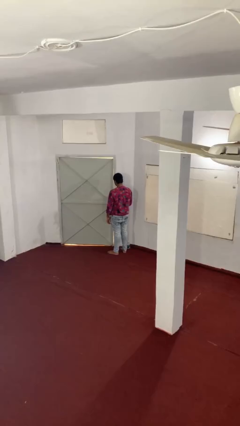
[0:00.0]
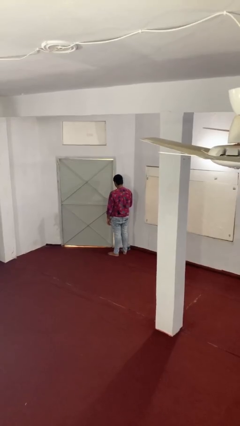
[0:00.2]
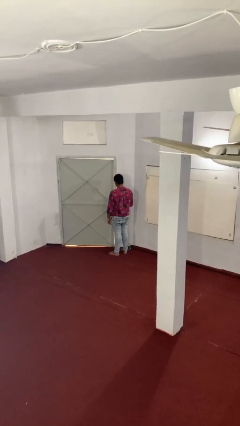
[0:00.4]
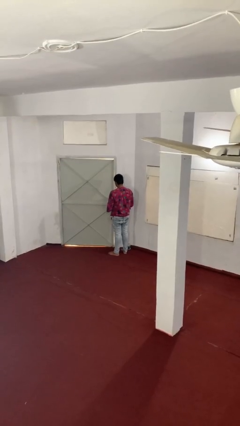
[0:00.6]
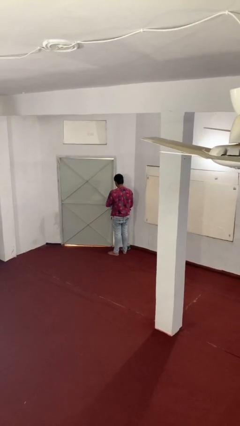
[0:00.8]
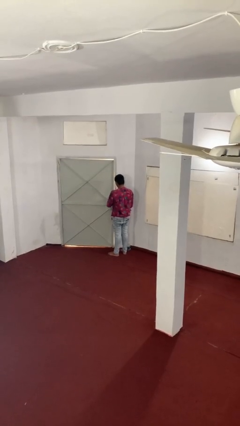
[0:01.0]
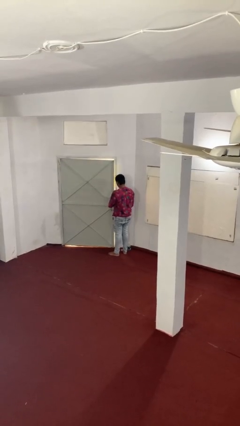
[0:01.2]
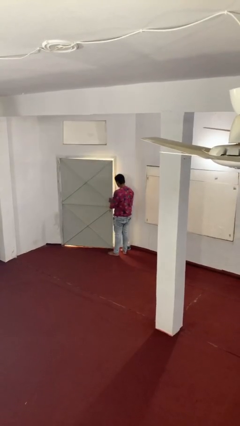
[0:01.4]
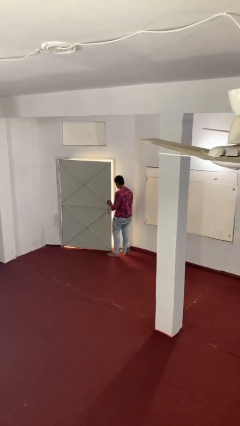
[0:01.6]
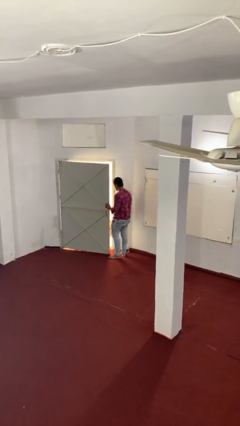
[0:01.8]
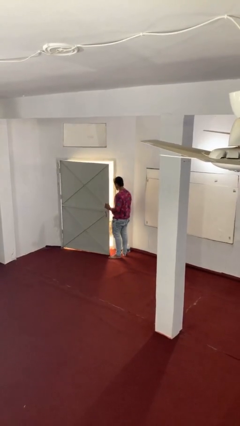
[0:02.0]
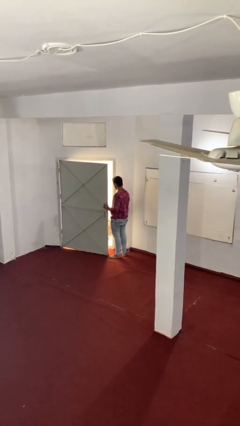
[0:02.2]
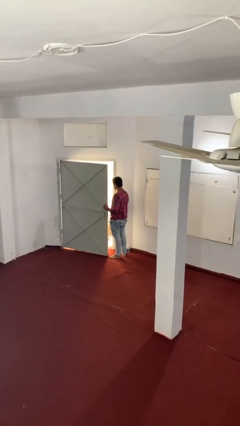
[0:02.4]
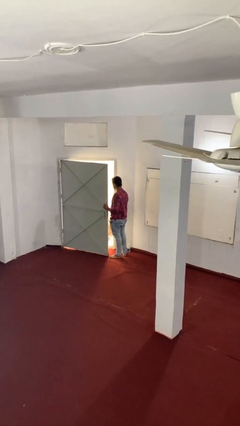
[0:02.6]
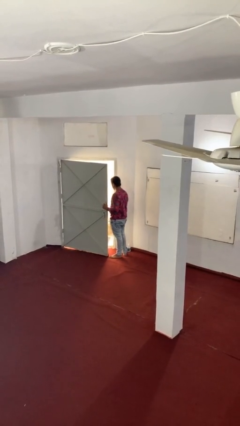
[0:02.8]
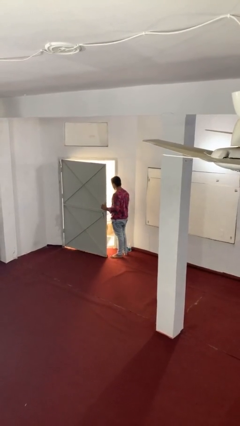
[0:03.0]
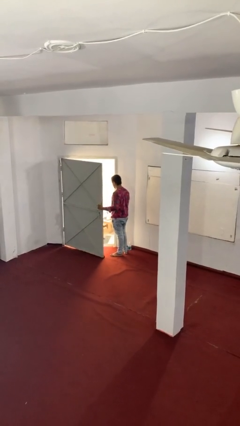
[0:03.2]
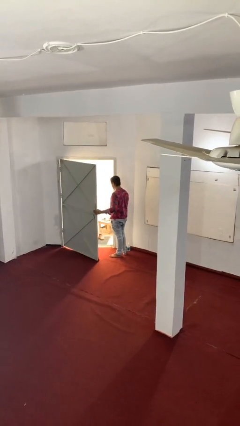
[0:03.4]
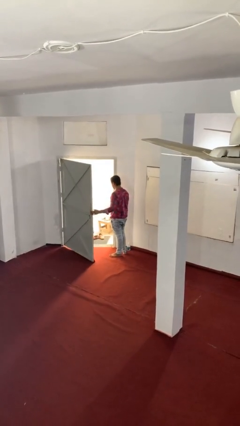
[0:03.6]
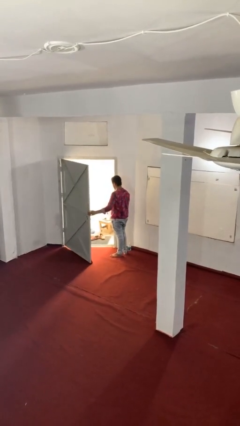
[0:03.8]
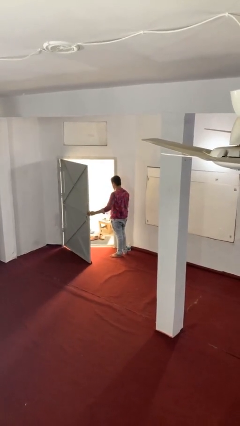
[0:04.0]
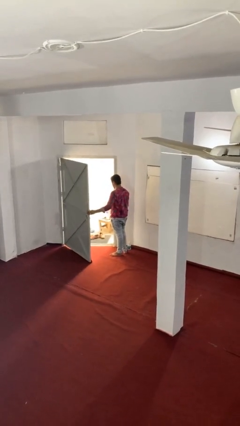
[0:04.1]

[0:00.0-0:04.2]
person opens facility door

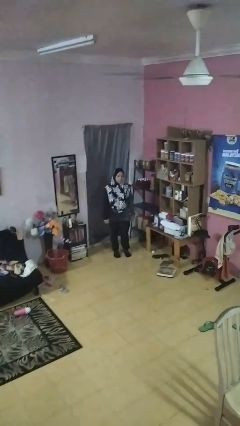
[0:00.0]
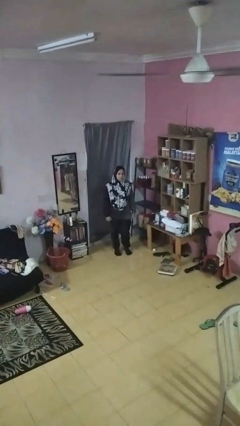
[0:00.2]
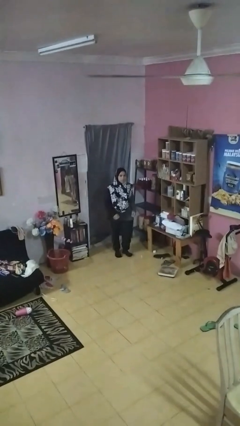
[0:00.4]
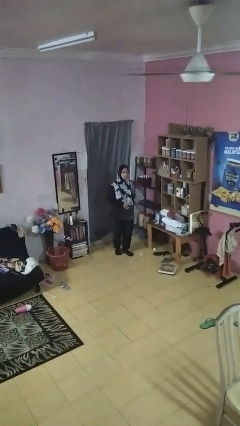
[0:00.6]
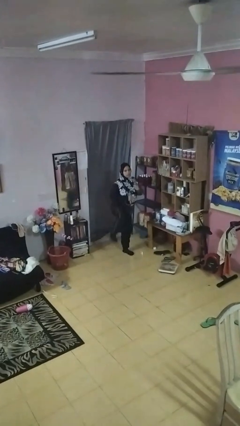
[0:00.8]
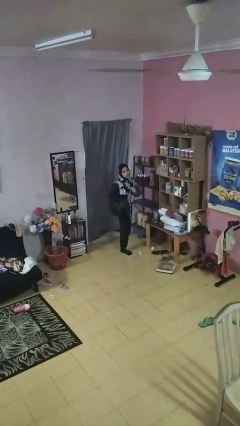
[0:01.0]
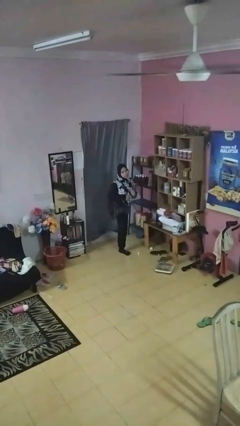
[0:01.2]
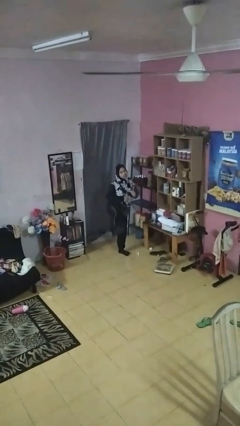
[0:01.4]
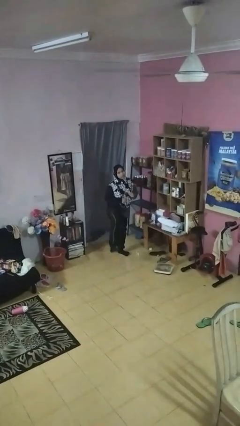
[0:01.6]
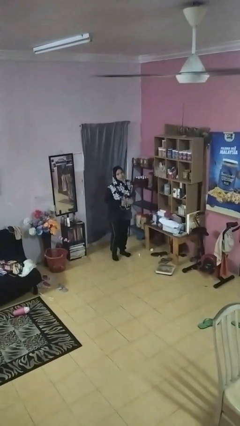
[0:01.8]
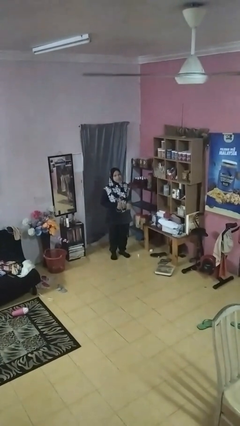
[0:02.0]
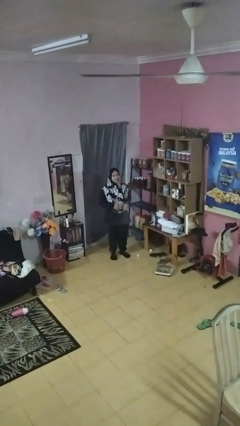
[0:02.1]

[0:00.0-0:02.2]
person karate kicks

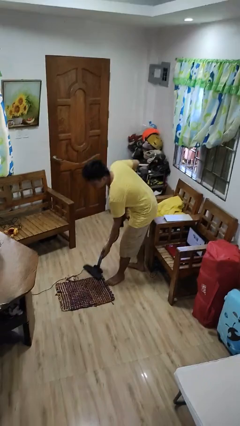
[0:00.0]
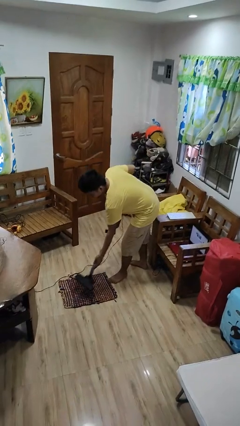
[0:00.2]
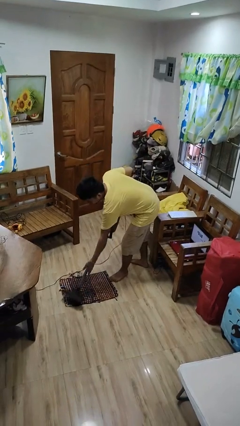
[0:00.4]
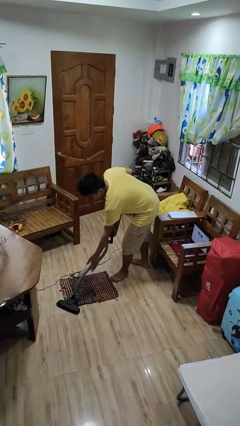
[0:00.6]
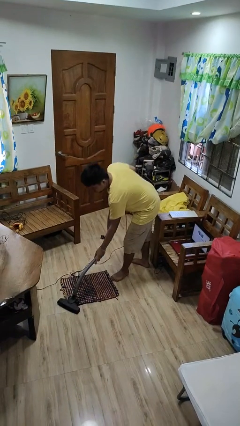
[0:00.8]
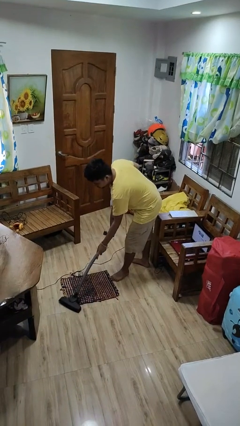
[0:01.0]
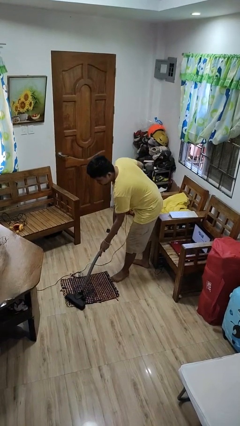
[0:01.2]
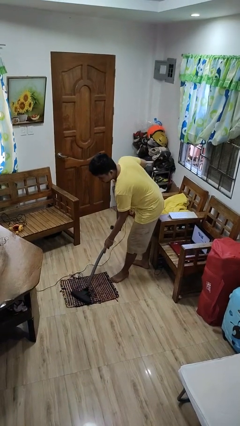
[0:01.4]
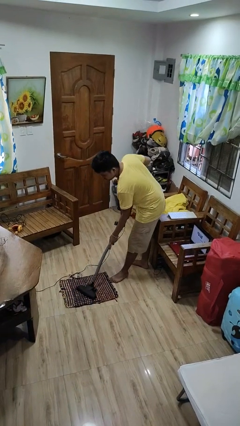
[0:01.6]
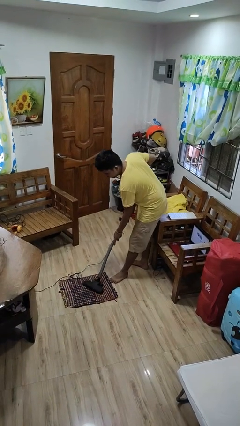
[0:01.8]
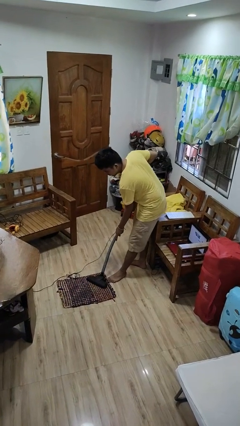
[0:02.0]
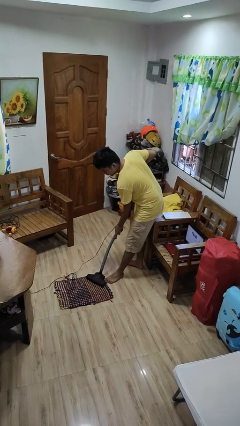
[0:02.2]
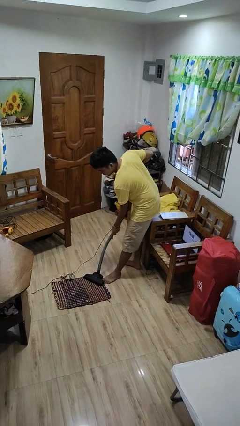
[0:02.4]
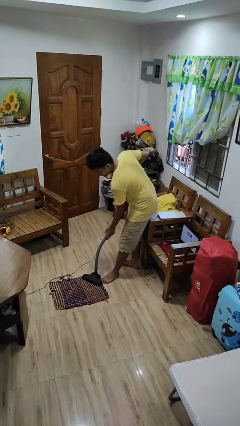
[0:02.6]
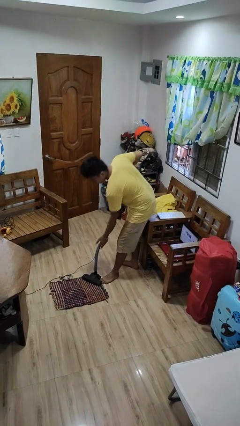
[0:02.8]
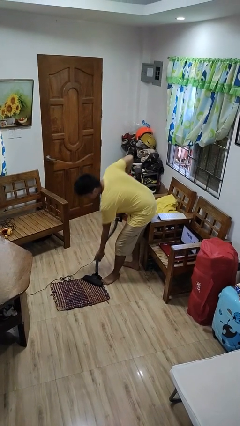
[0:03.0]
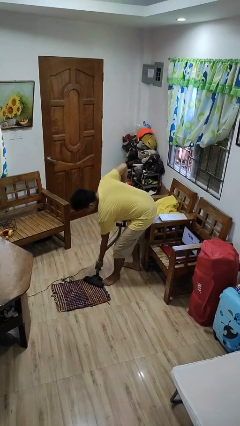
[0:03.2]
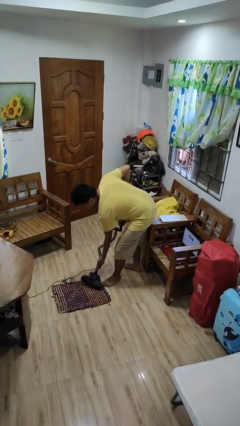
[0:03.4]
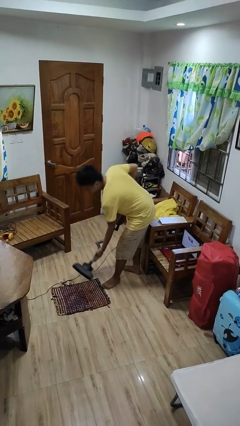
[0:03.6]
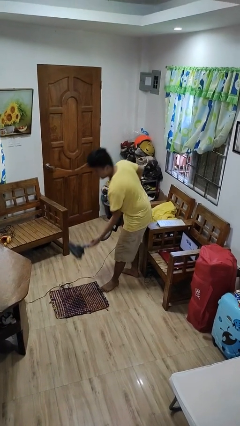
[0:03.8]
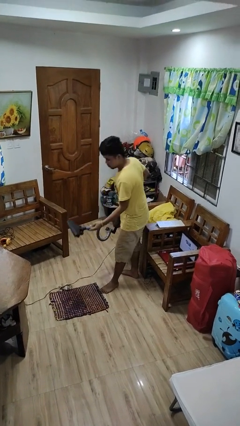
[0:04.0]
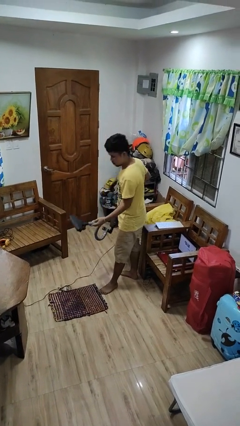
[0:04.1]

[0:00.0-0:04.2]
person vacuums carpet

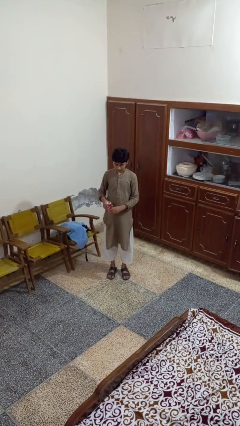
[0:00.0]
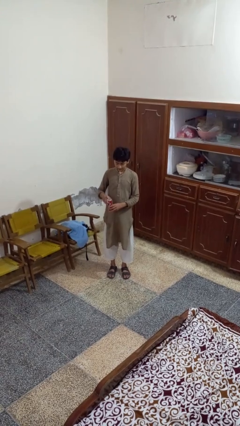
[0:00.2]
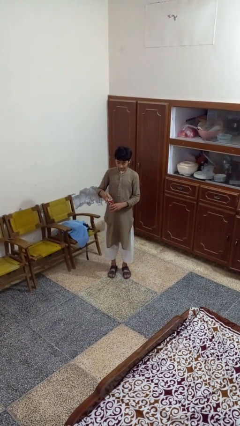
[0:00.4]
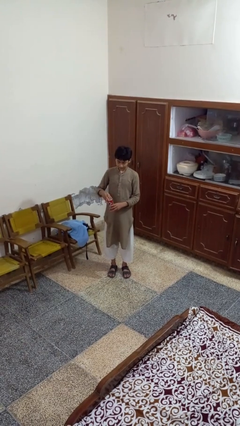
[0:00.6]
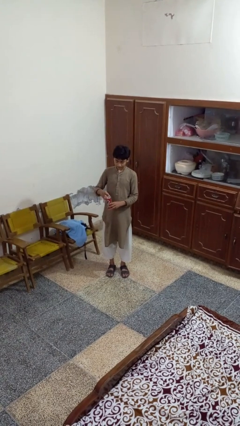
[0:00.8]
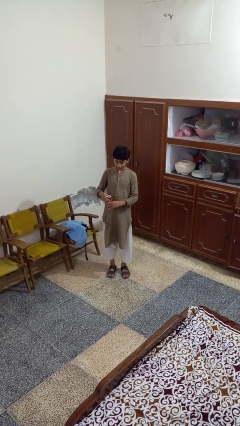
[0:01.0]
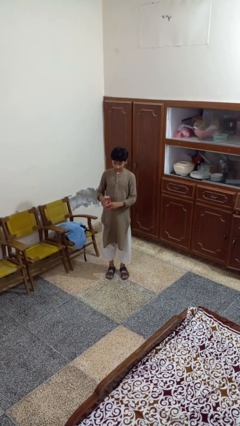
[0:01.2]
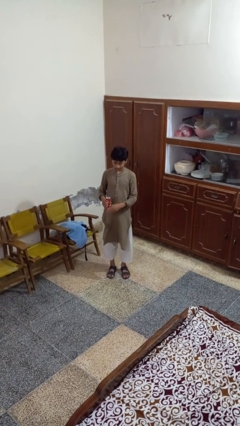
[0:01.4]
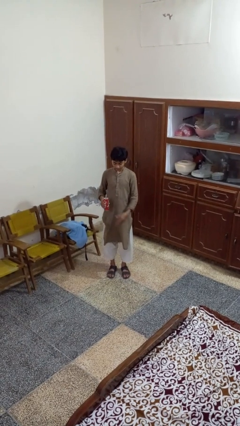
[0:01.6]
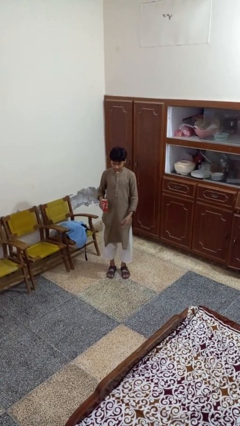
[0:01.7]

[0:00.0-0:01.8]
person opens beverage can

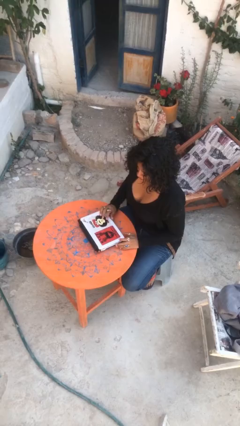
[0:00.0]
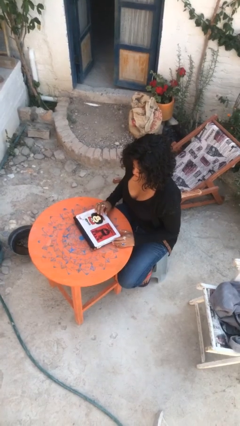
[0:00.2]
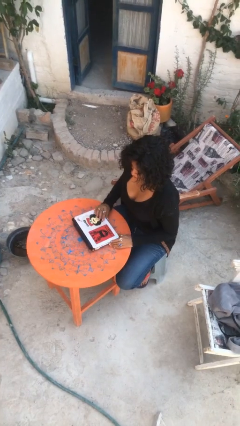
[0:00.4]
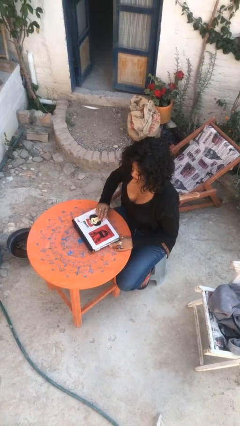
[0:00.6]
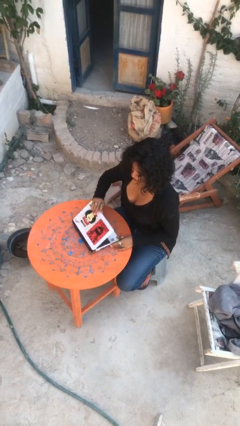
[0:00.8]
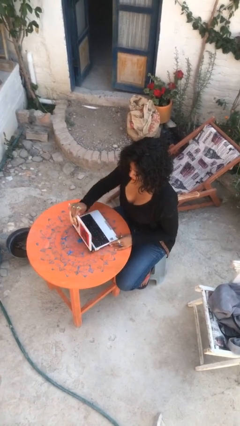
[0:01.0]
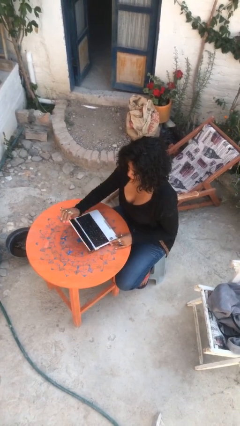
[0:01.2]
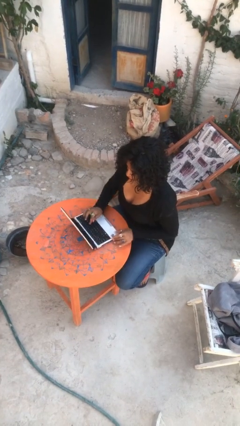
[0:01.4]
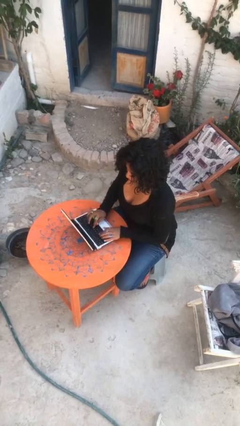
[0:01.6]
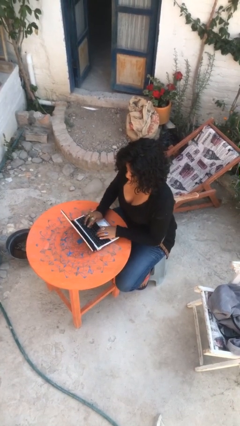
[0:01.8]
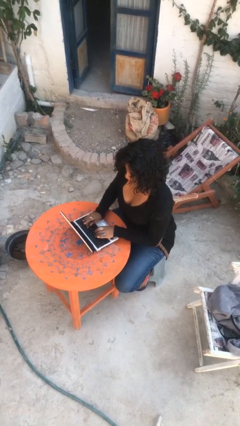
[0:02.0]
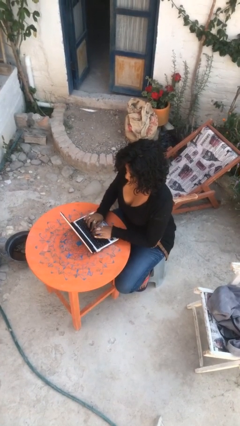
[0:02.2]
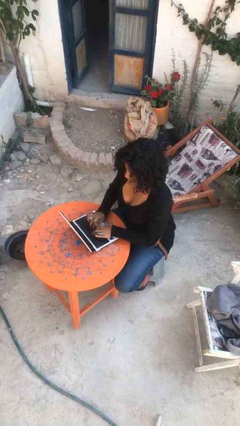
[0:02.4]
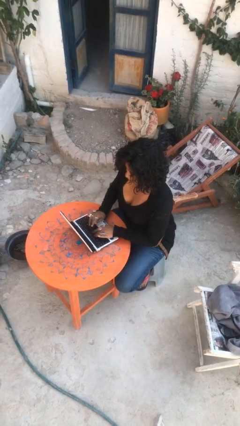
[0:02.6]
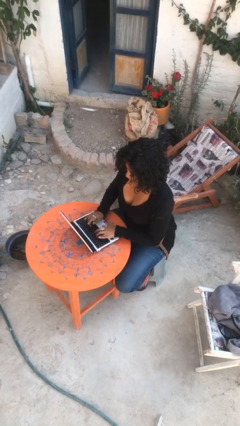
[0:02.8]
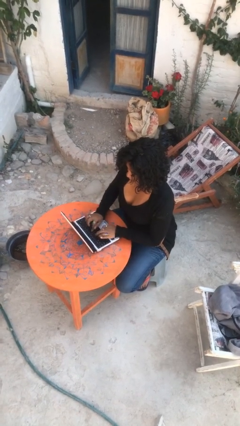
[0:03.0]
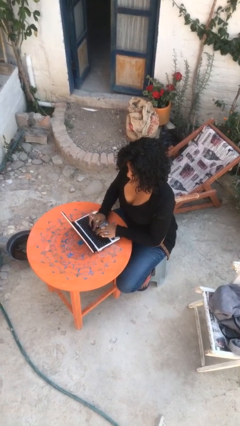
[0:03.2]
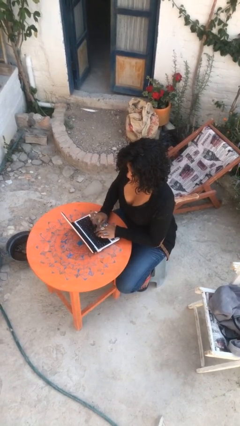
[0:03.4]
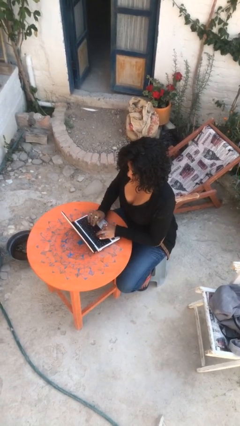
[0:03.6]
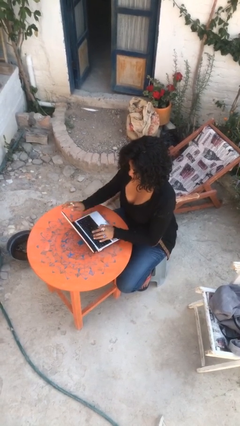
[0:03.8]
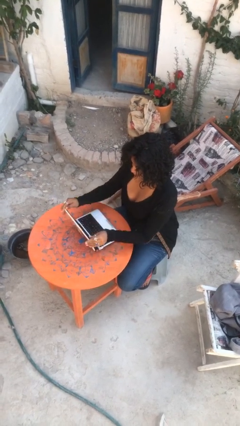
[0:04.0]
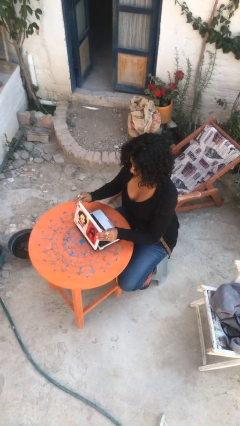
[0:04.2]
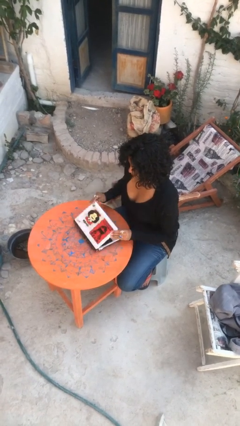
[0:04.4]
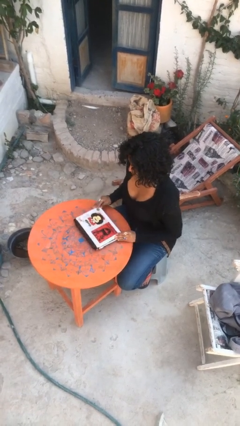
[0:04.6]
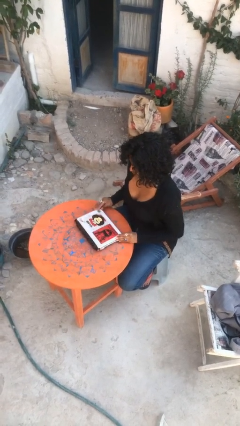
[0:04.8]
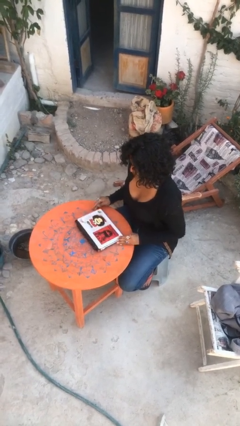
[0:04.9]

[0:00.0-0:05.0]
person interacts with laptop

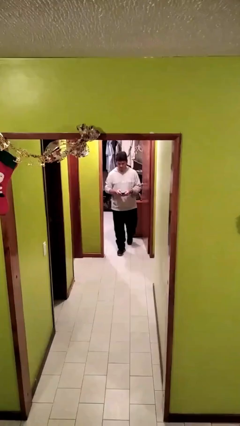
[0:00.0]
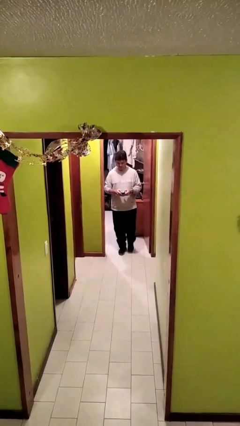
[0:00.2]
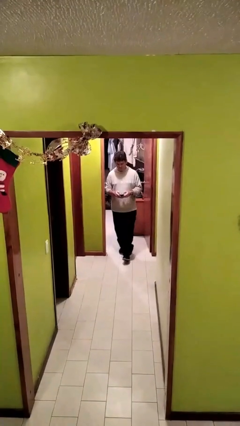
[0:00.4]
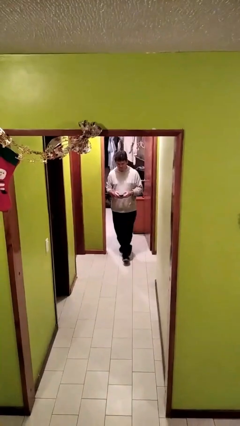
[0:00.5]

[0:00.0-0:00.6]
person enters scene through structure
